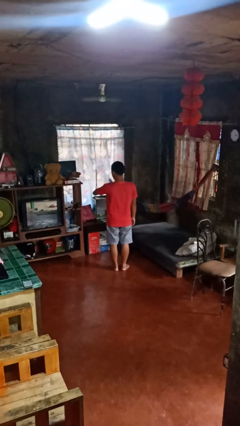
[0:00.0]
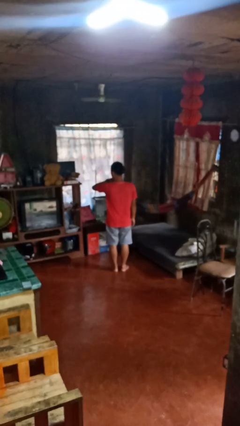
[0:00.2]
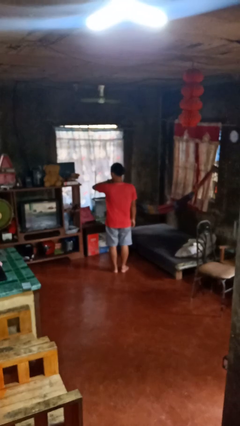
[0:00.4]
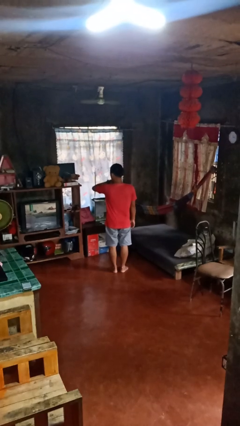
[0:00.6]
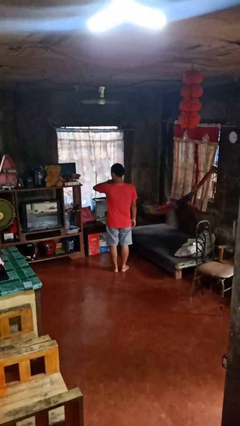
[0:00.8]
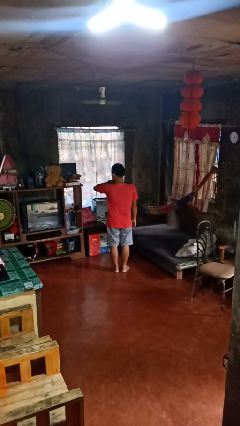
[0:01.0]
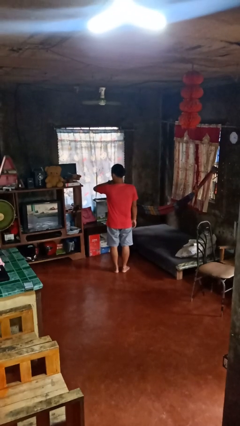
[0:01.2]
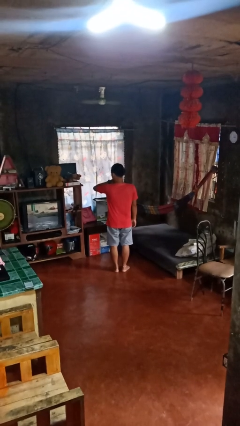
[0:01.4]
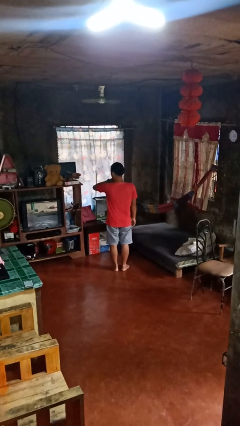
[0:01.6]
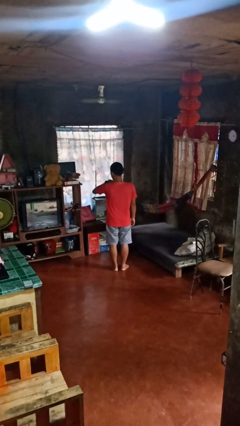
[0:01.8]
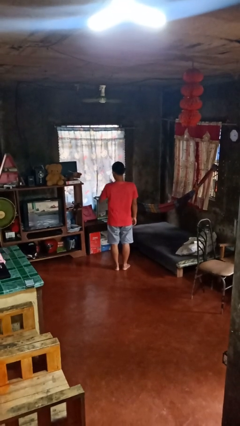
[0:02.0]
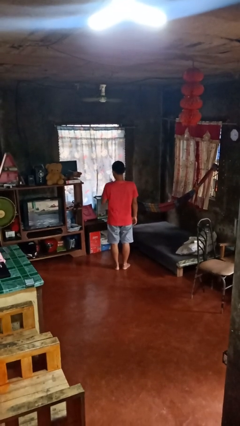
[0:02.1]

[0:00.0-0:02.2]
person looks at wristwatch

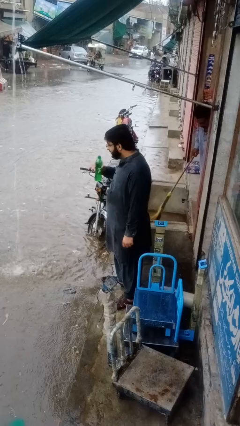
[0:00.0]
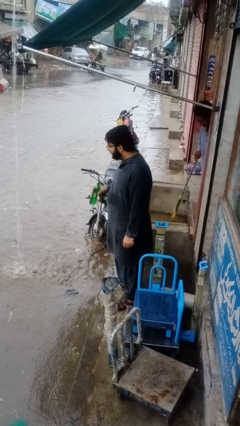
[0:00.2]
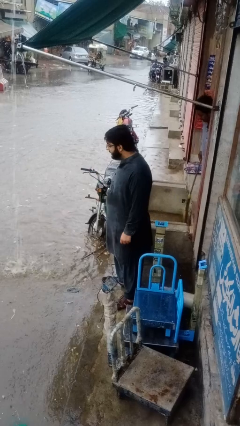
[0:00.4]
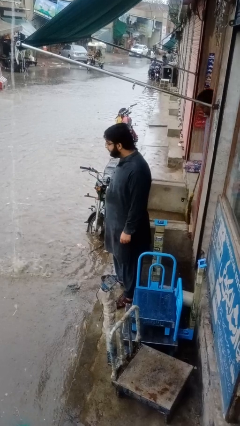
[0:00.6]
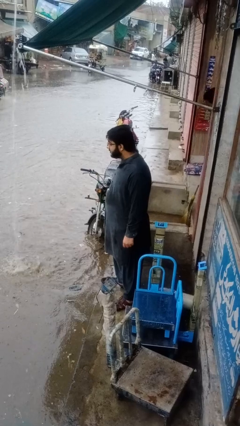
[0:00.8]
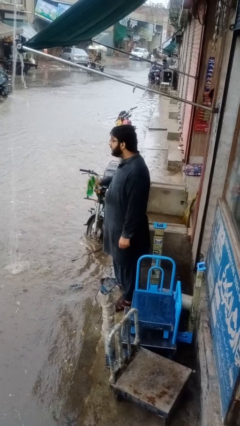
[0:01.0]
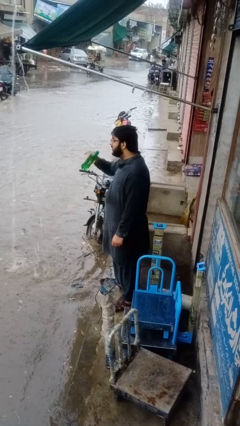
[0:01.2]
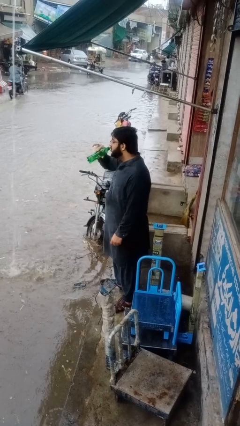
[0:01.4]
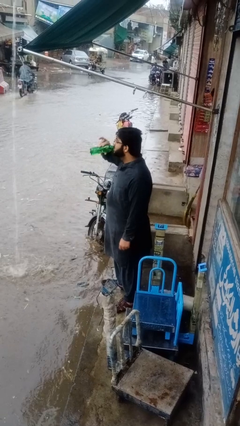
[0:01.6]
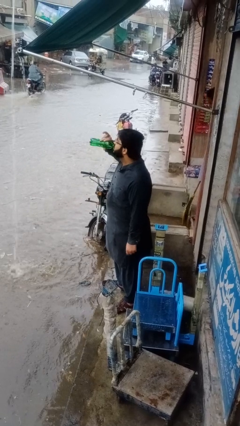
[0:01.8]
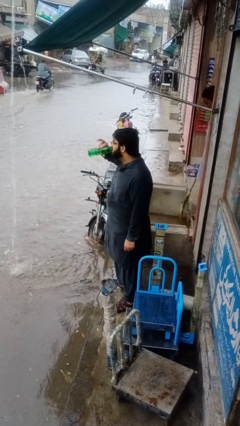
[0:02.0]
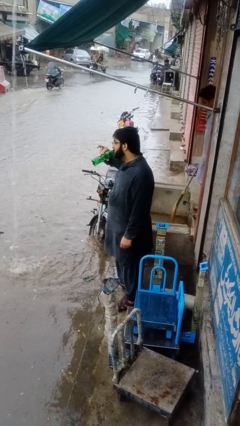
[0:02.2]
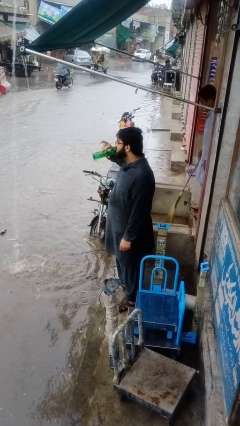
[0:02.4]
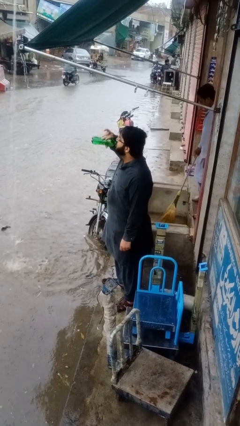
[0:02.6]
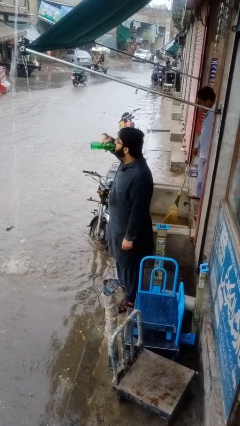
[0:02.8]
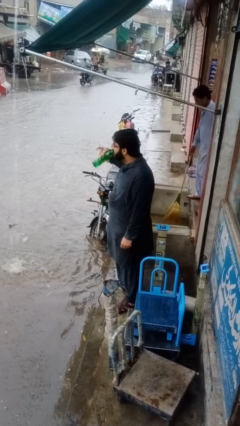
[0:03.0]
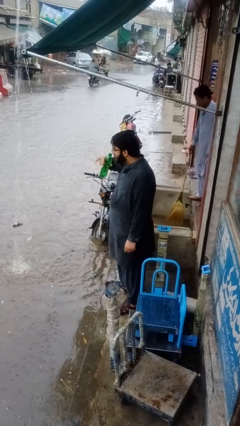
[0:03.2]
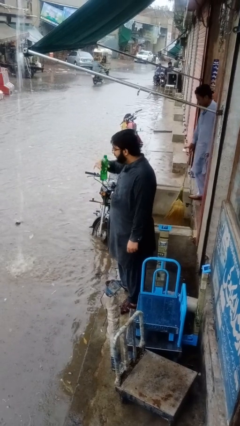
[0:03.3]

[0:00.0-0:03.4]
person drinks from bottle

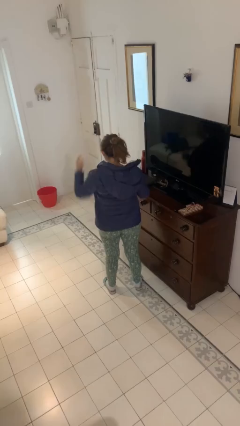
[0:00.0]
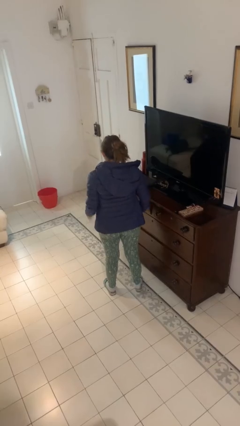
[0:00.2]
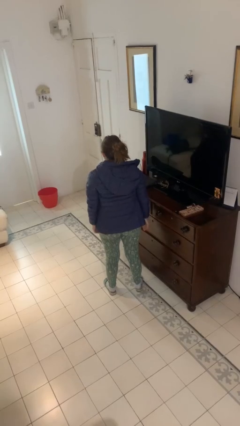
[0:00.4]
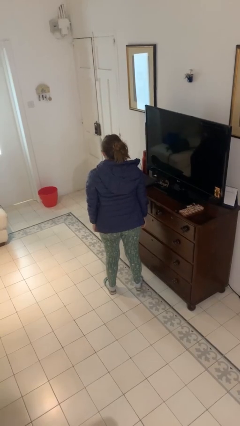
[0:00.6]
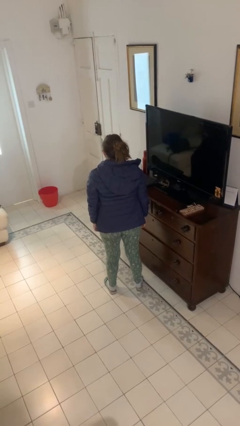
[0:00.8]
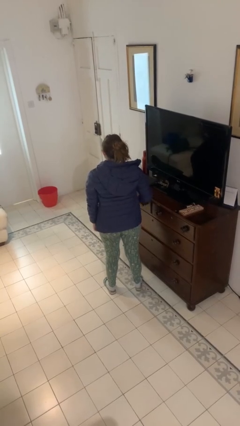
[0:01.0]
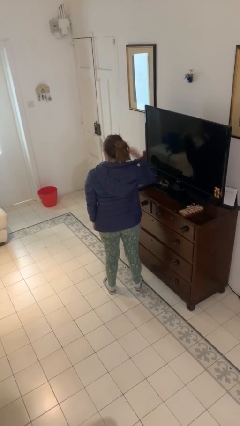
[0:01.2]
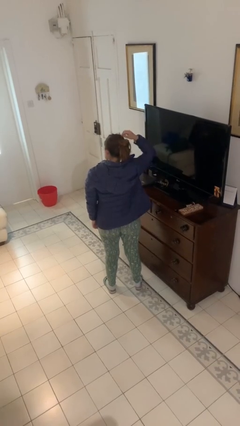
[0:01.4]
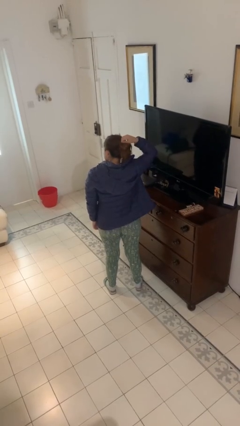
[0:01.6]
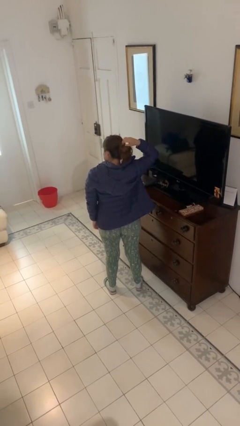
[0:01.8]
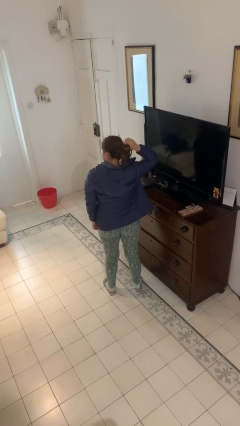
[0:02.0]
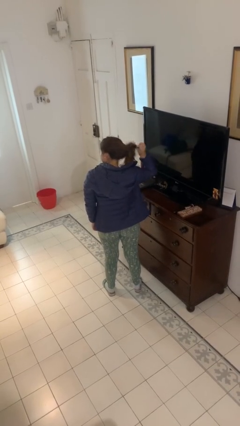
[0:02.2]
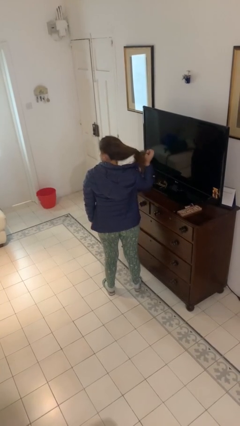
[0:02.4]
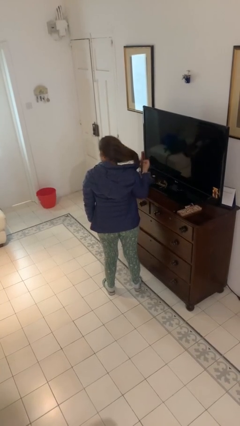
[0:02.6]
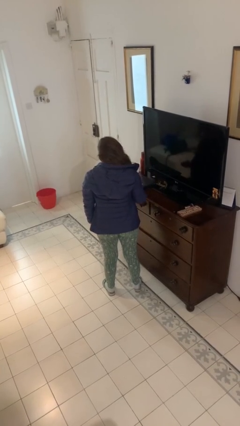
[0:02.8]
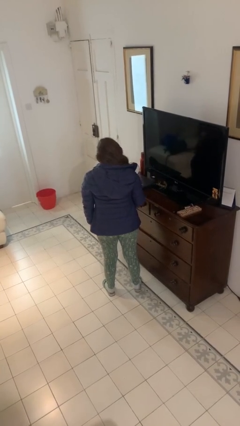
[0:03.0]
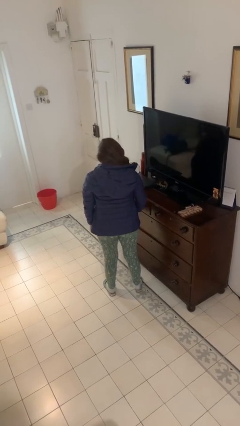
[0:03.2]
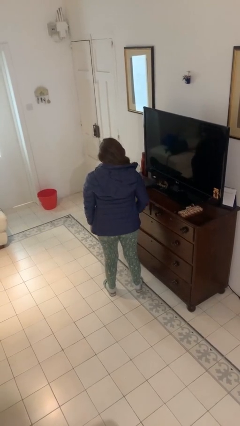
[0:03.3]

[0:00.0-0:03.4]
person takes off hairtie

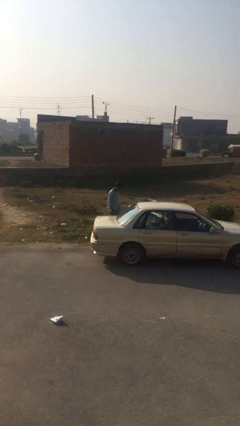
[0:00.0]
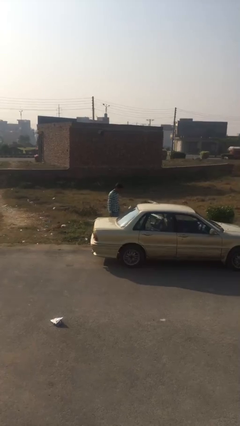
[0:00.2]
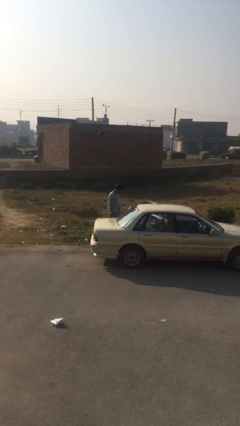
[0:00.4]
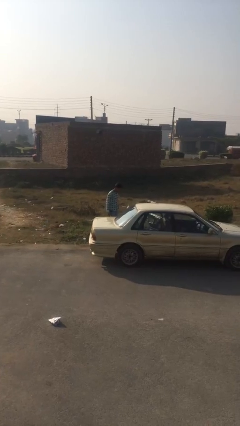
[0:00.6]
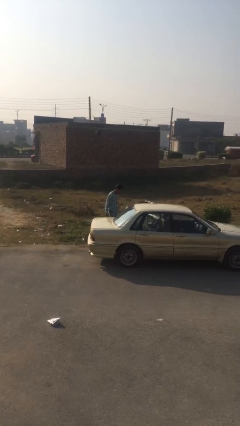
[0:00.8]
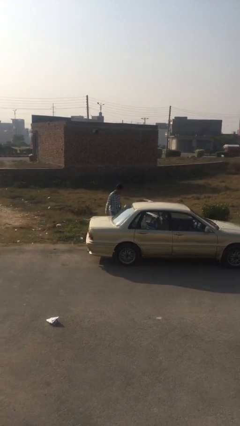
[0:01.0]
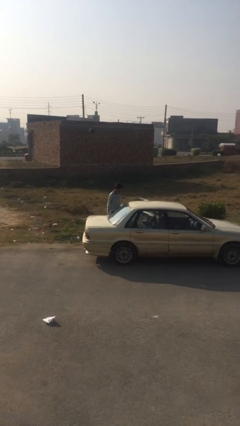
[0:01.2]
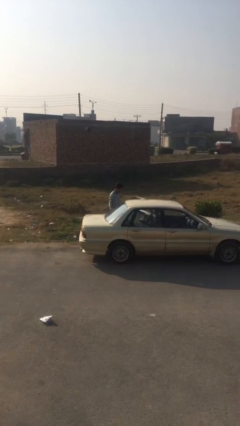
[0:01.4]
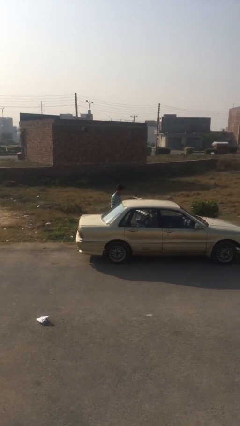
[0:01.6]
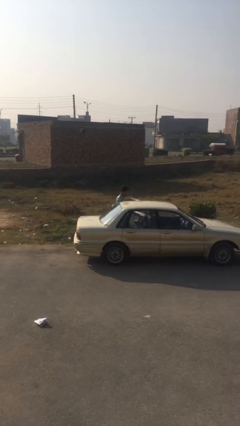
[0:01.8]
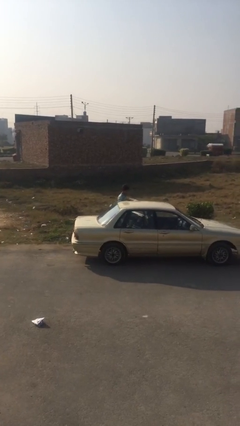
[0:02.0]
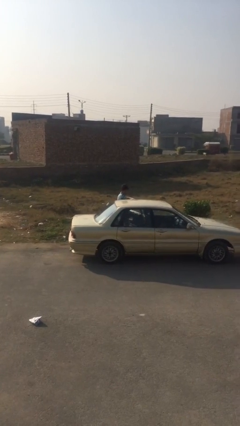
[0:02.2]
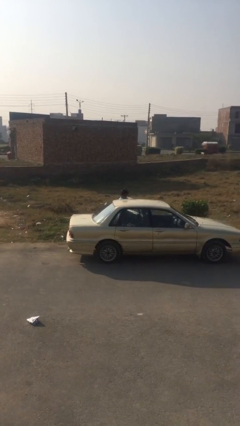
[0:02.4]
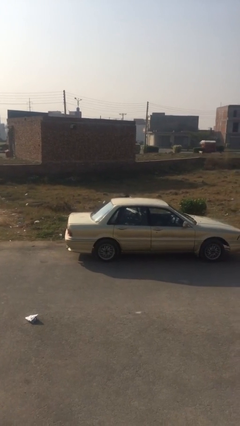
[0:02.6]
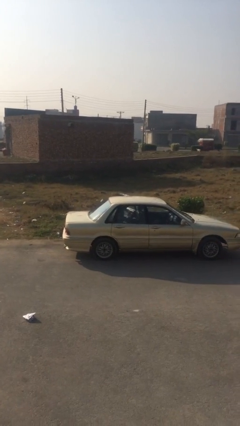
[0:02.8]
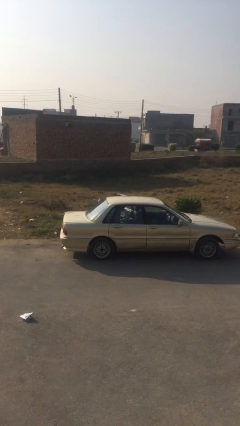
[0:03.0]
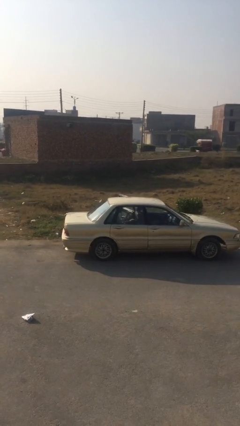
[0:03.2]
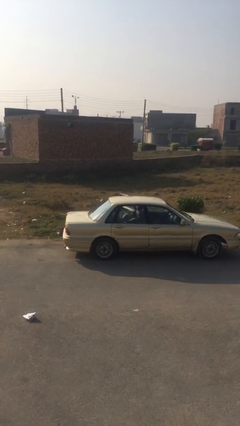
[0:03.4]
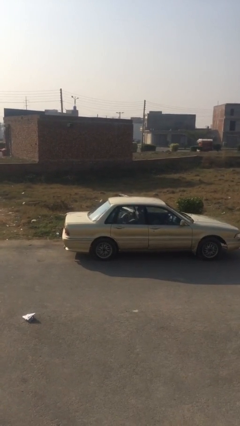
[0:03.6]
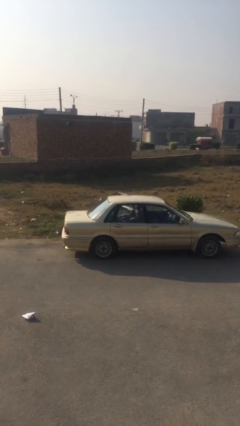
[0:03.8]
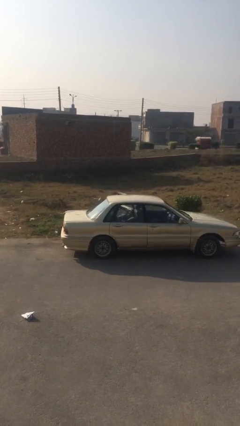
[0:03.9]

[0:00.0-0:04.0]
person enters car

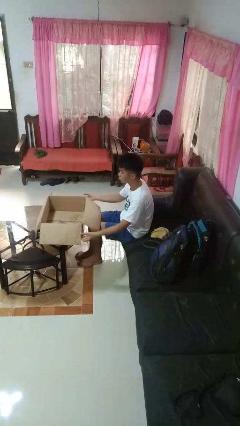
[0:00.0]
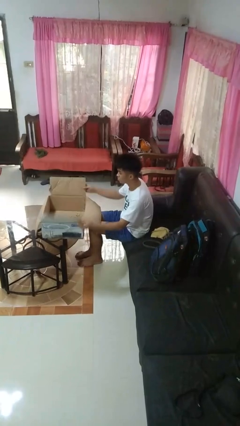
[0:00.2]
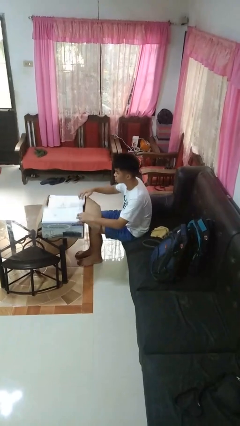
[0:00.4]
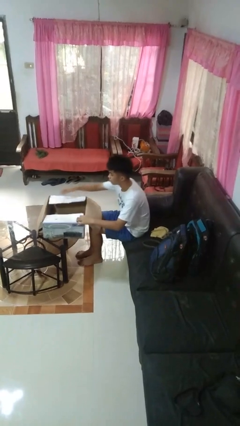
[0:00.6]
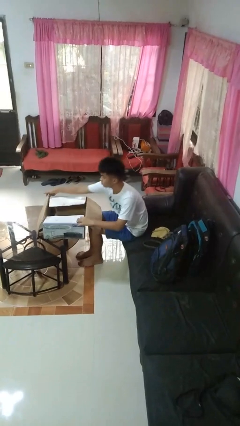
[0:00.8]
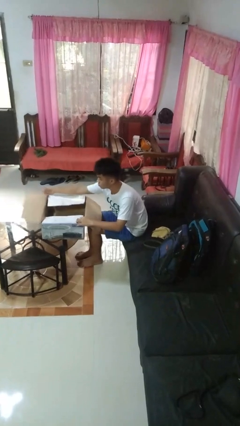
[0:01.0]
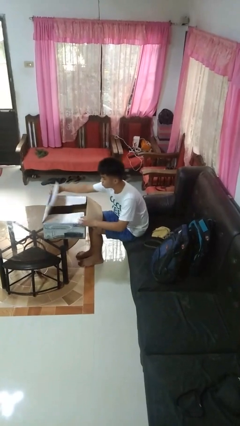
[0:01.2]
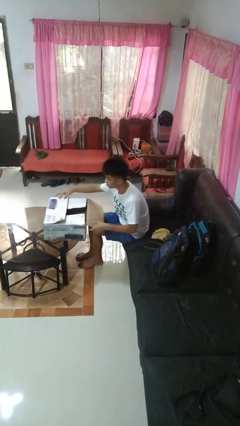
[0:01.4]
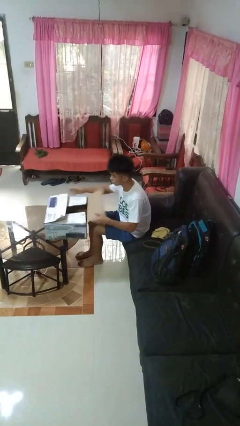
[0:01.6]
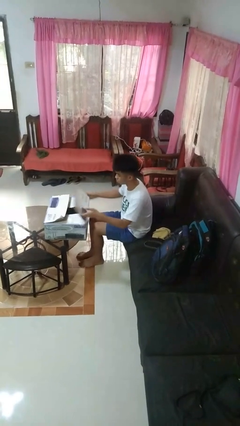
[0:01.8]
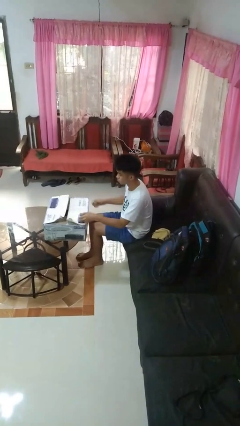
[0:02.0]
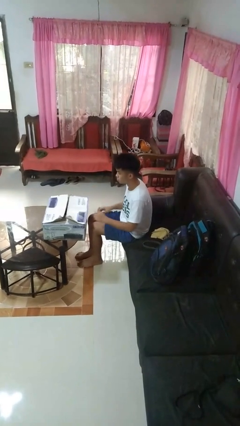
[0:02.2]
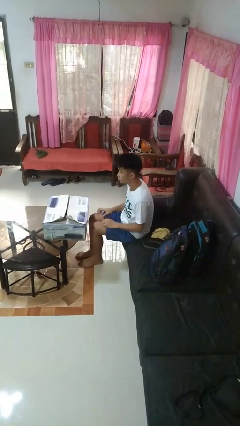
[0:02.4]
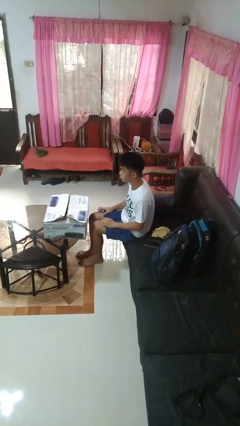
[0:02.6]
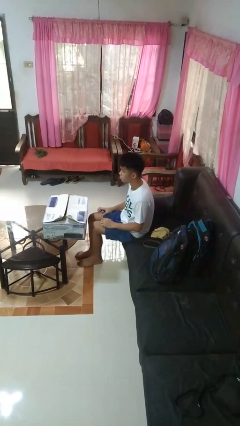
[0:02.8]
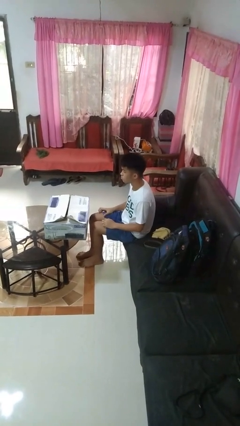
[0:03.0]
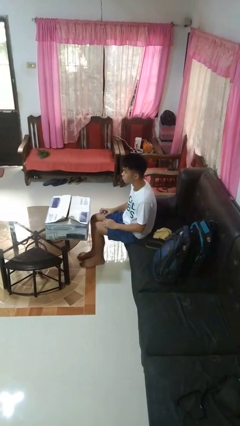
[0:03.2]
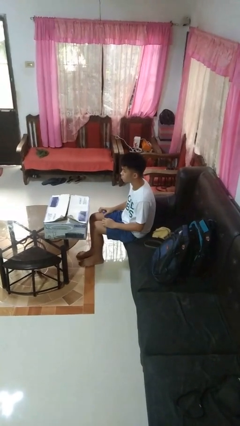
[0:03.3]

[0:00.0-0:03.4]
person closes box

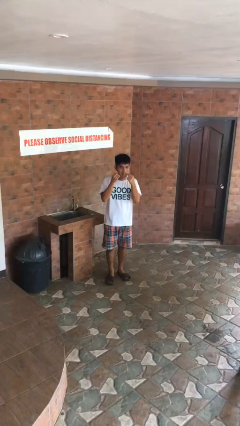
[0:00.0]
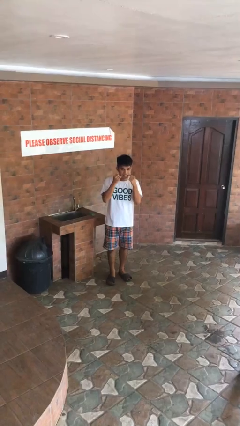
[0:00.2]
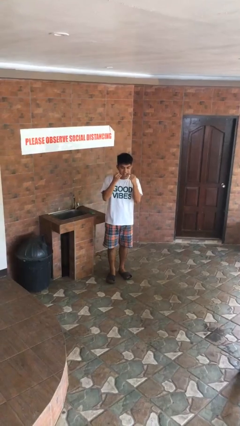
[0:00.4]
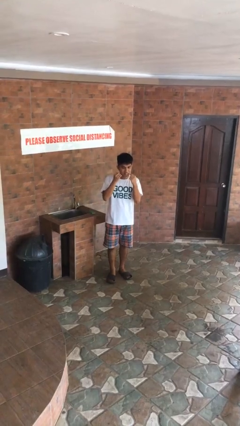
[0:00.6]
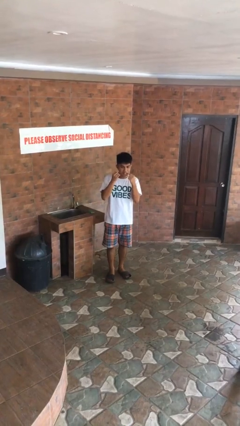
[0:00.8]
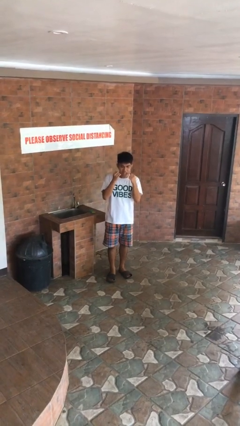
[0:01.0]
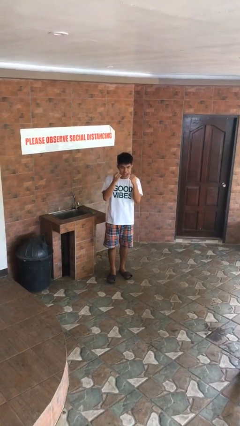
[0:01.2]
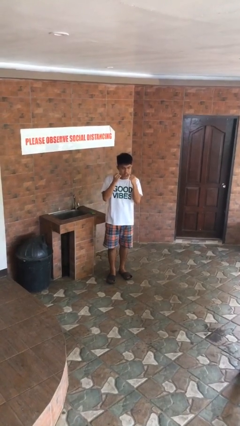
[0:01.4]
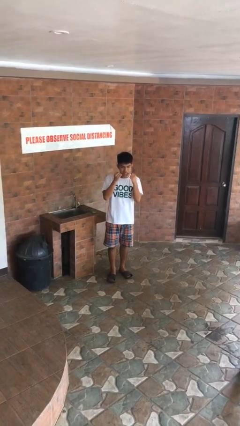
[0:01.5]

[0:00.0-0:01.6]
person flosses
